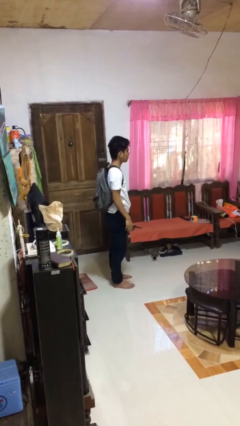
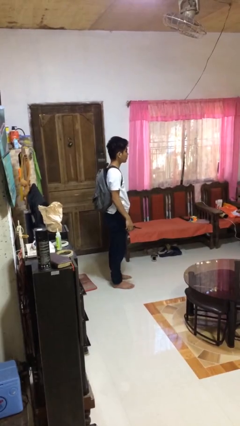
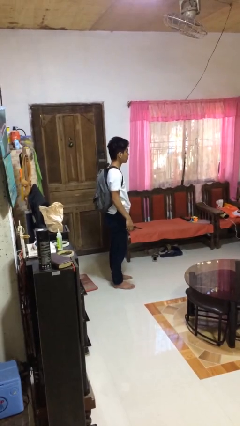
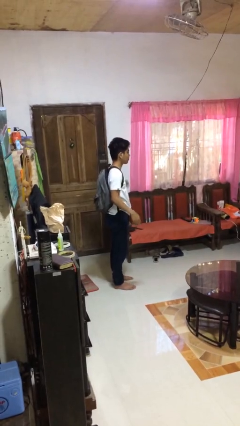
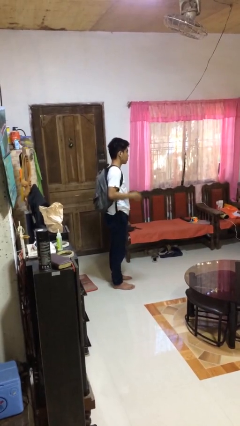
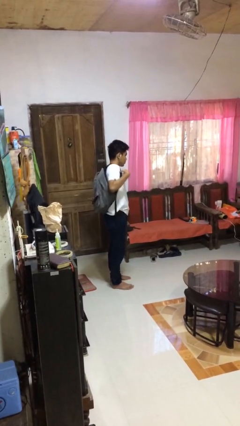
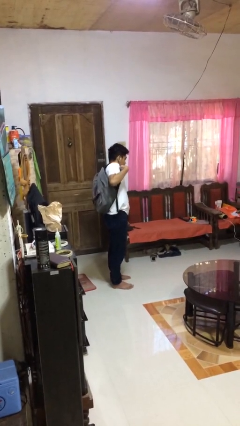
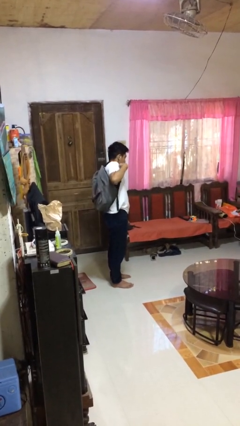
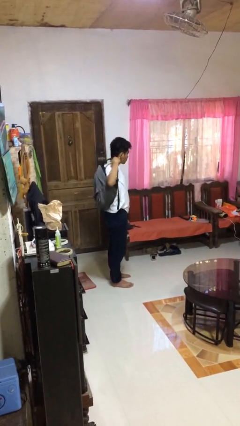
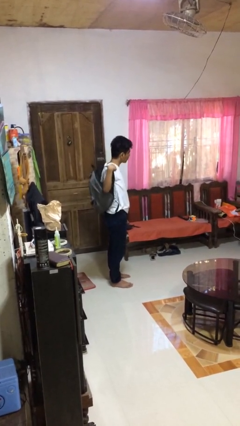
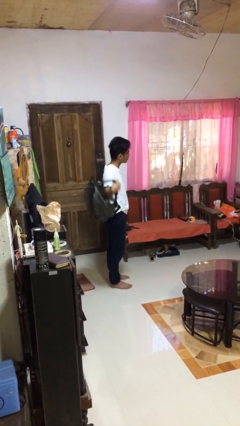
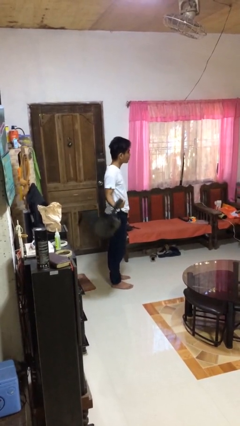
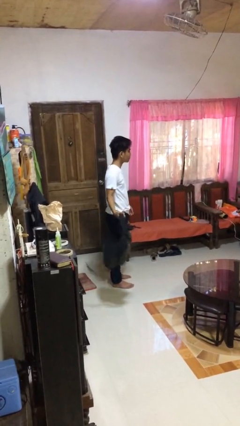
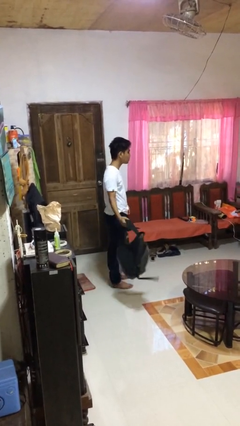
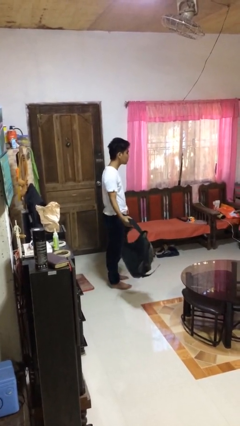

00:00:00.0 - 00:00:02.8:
person takes off backpack

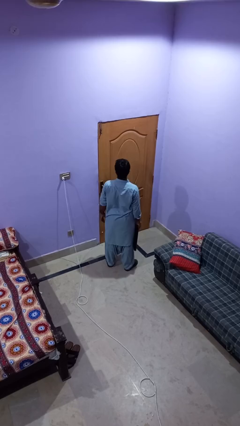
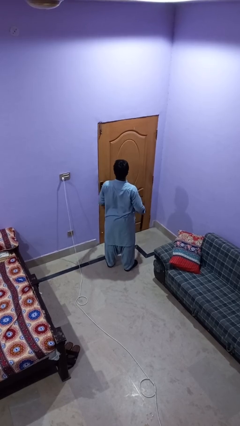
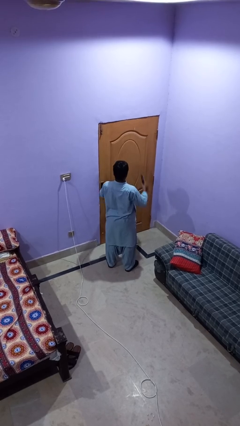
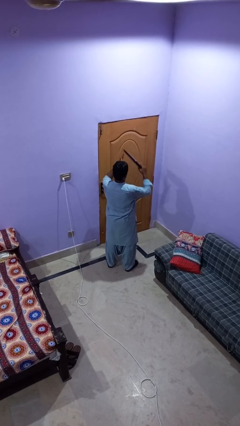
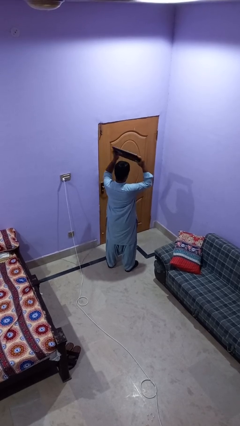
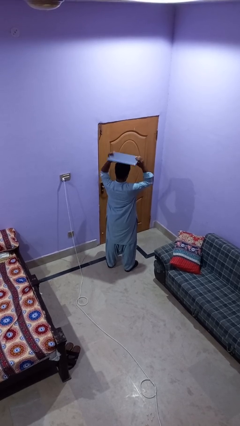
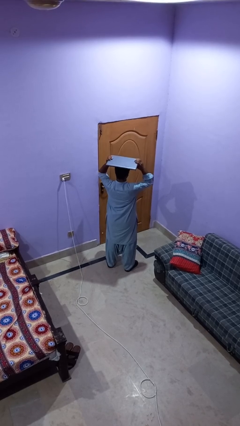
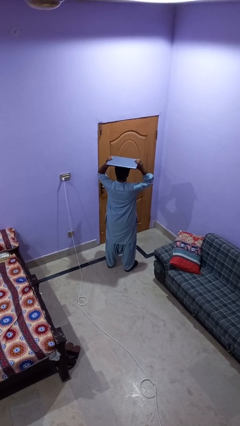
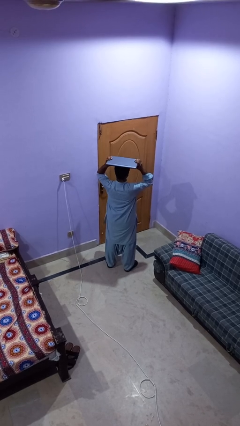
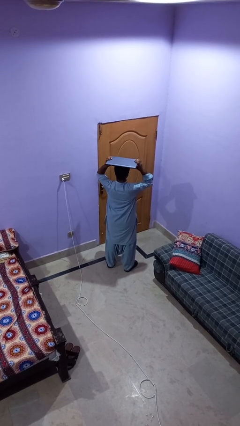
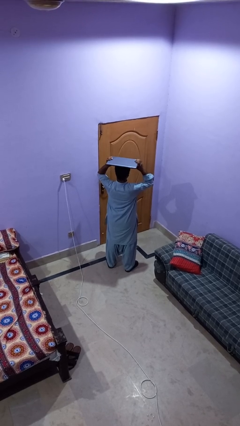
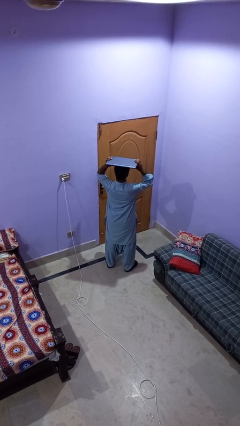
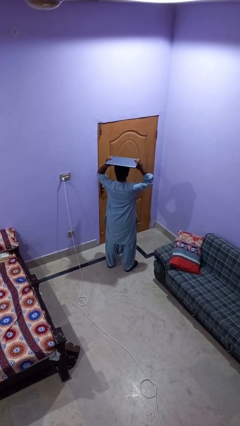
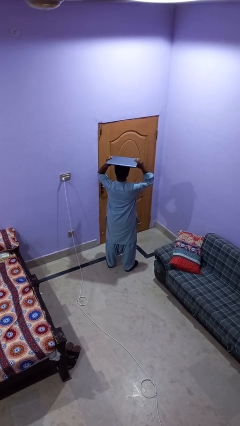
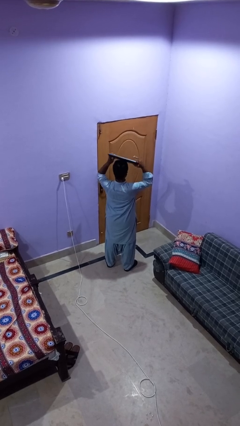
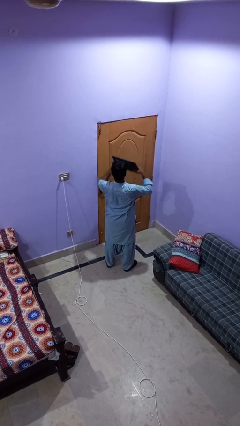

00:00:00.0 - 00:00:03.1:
person holds object above head

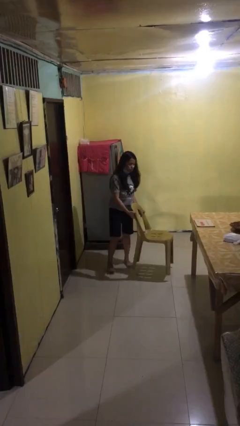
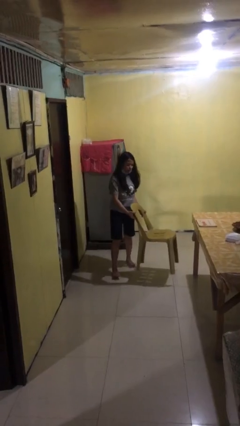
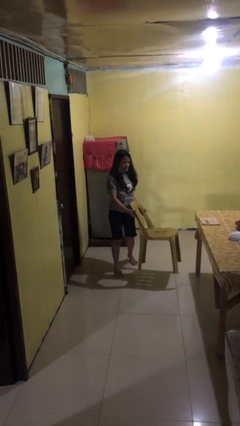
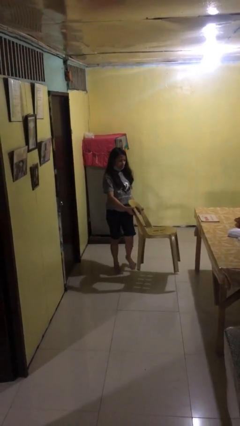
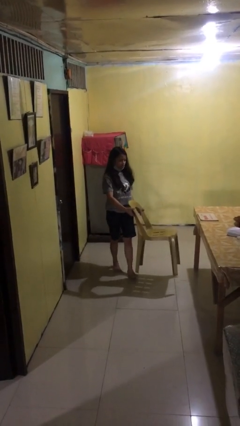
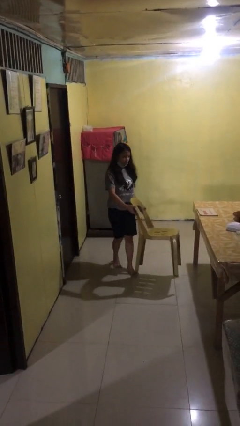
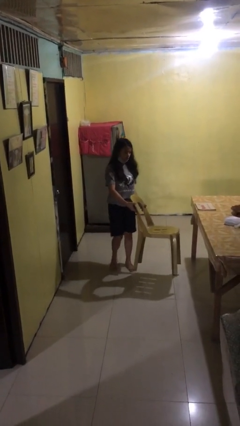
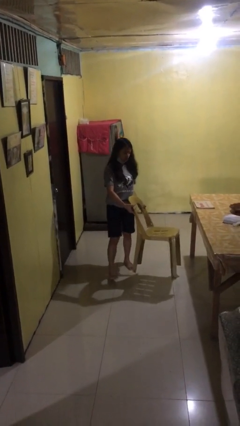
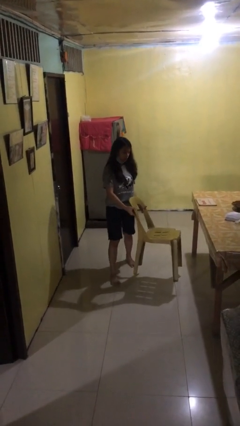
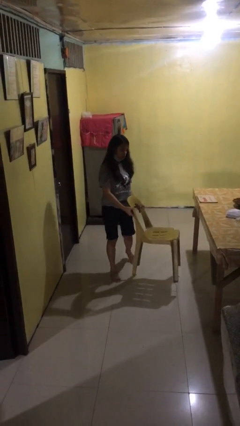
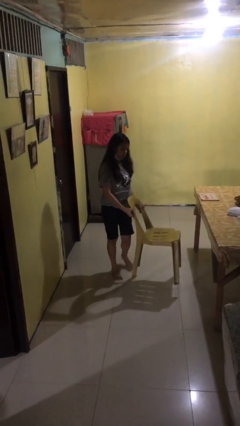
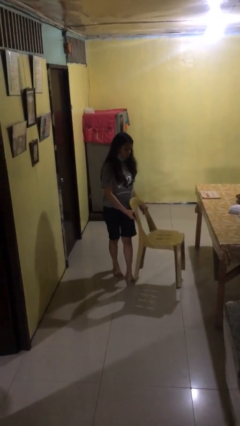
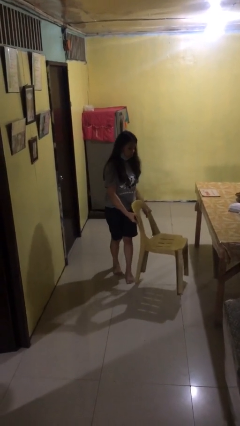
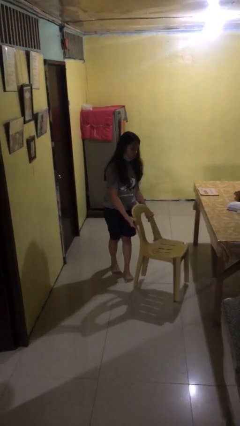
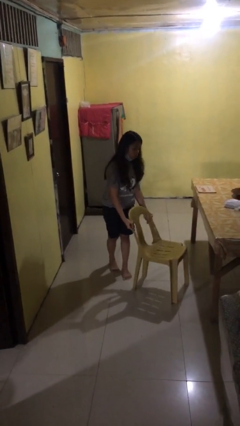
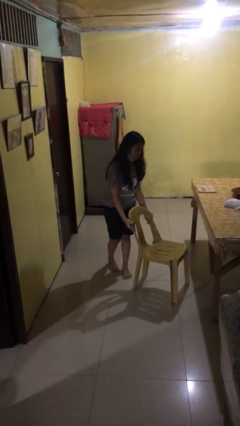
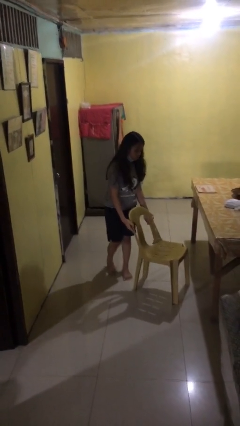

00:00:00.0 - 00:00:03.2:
person carries heavy object

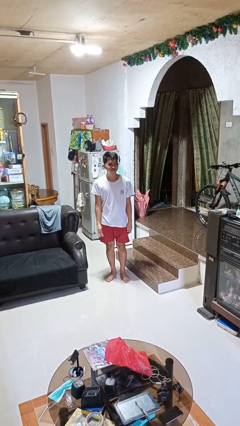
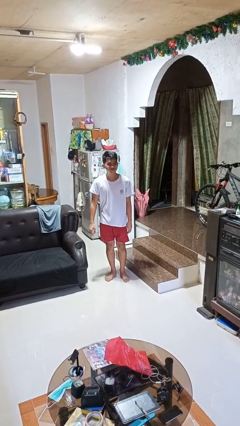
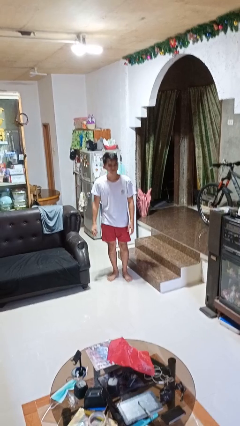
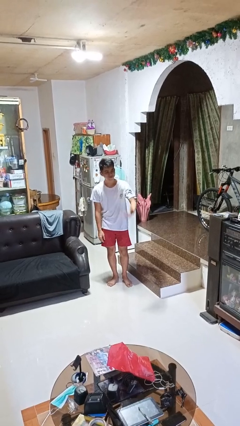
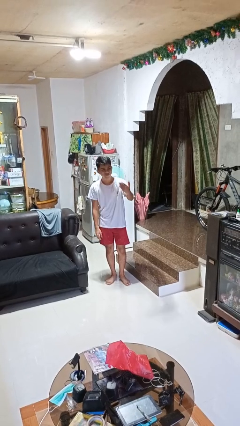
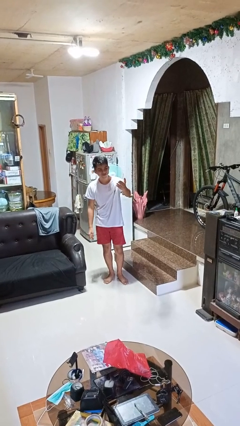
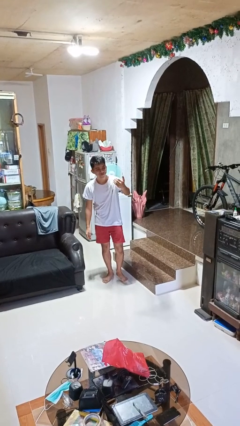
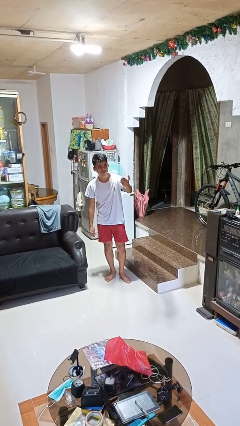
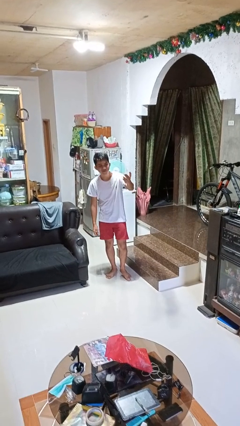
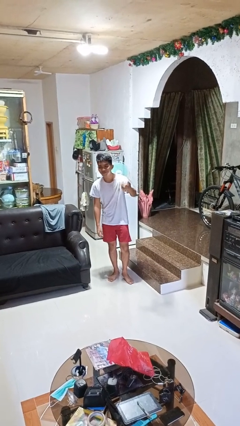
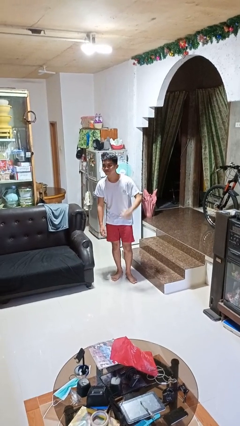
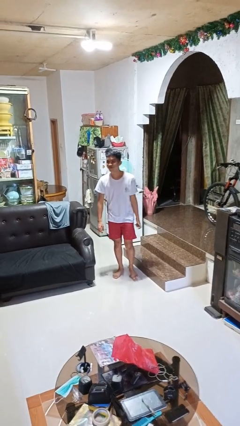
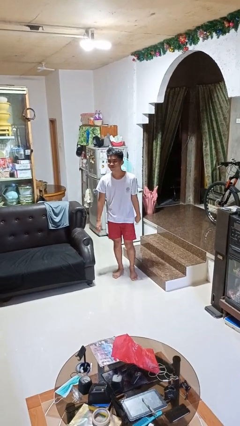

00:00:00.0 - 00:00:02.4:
person gestures come here

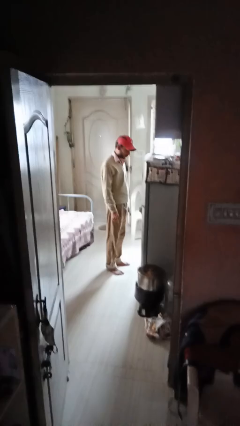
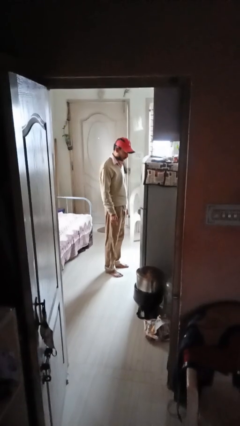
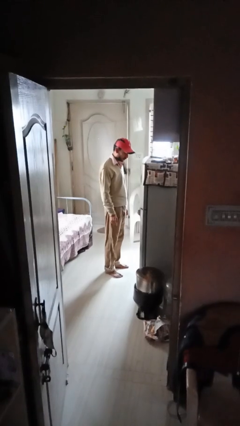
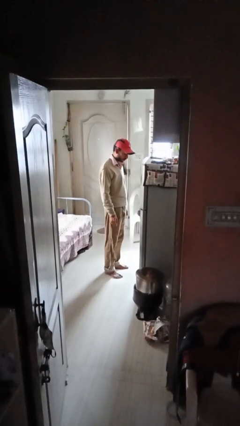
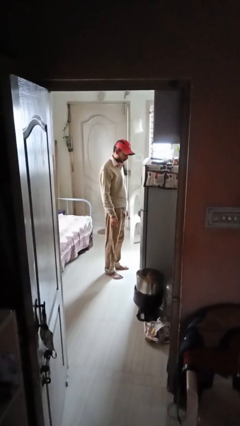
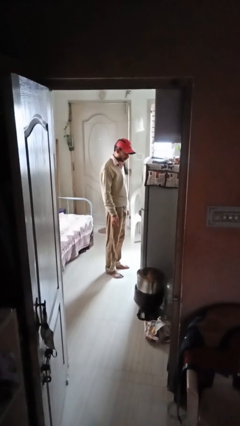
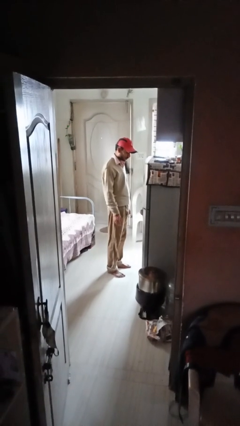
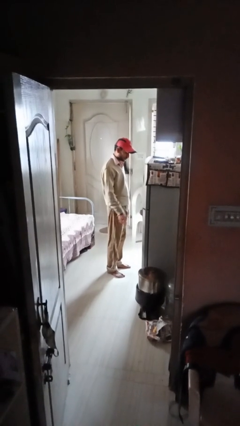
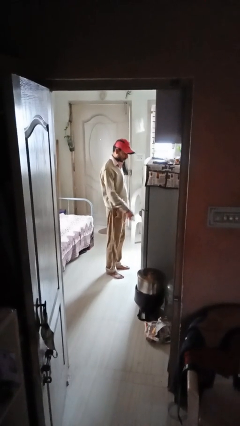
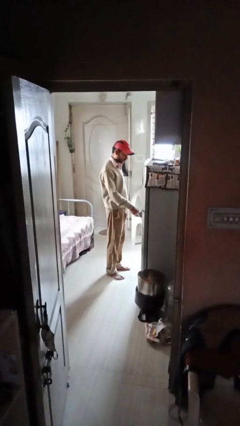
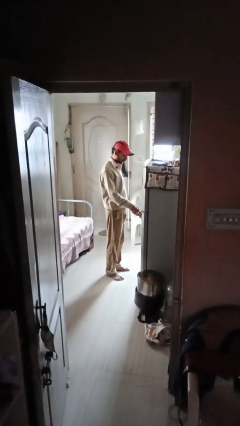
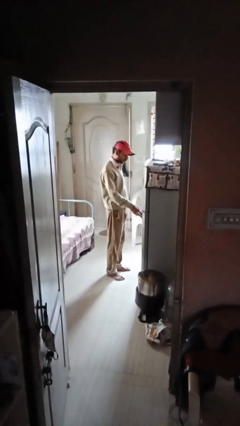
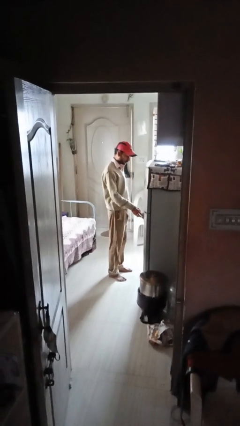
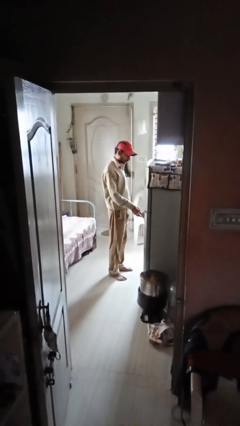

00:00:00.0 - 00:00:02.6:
person closes refrigerator

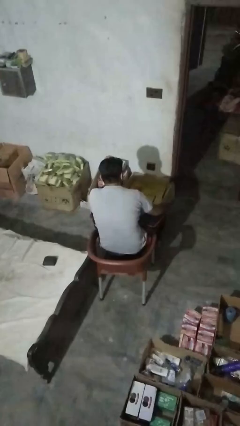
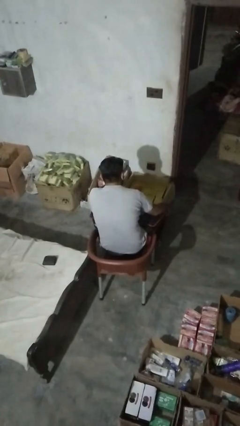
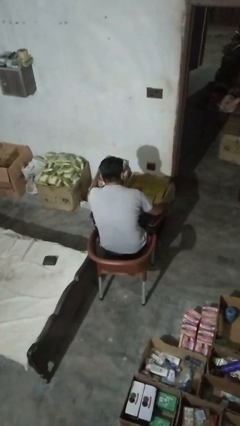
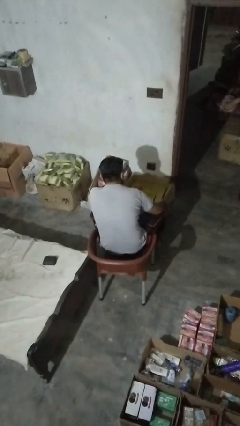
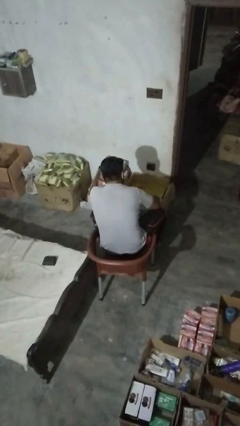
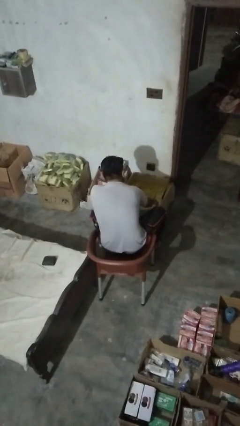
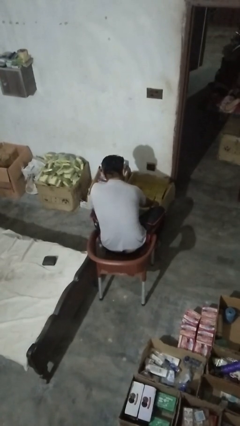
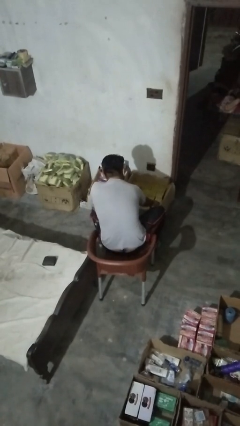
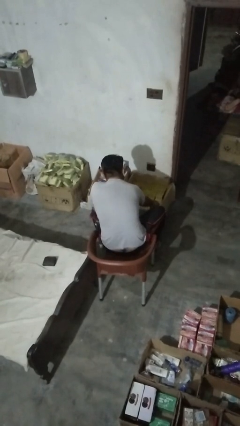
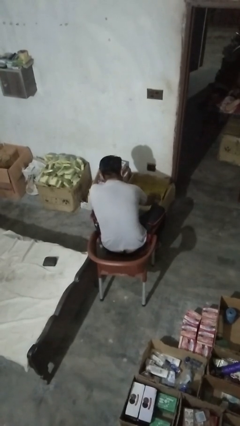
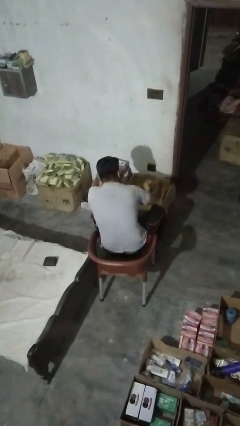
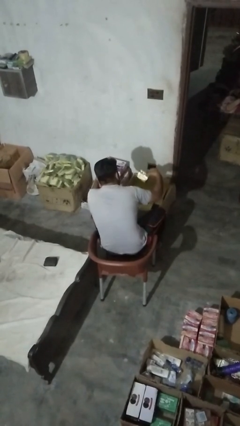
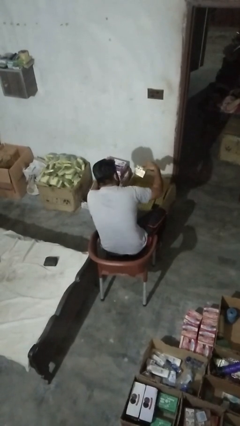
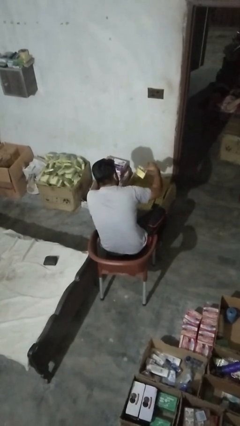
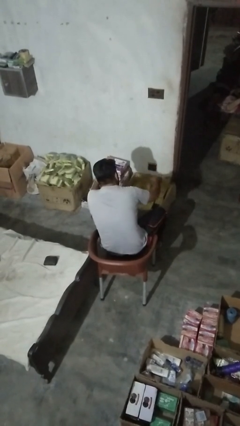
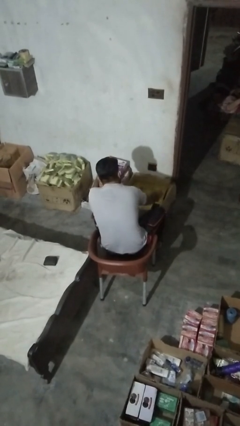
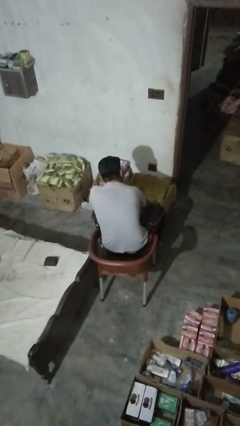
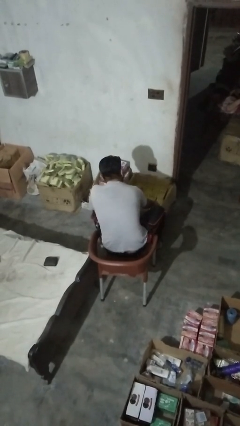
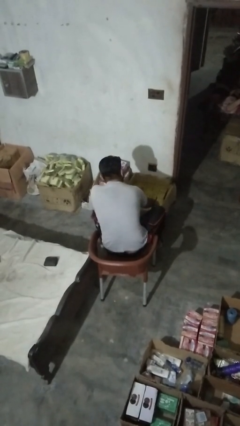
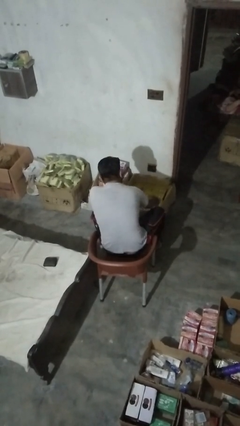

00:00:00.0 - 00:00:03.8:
person searches in box
